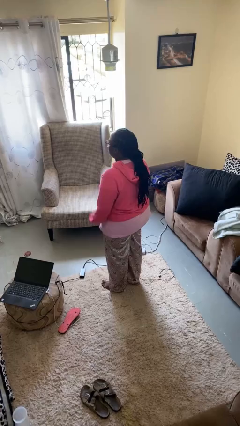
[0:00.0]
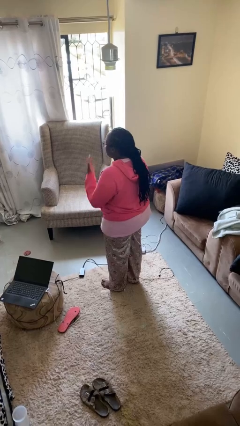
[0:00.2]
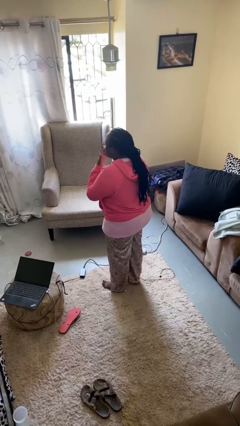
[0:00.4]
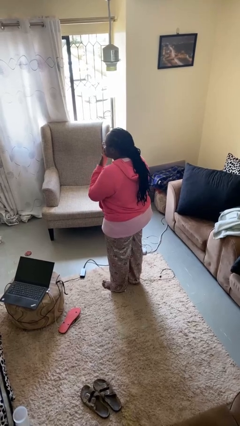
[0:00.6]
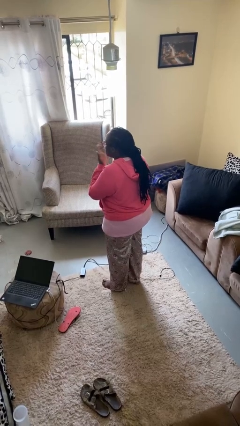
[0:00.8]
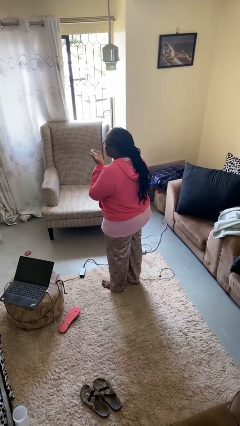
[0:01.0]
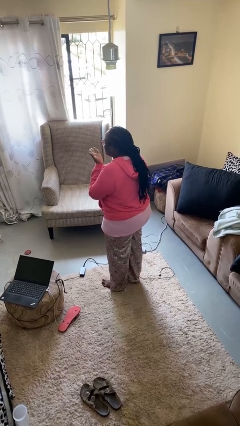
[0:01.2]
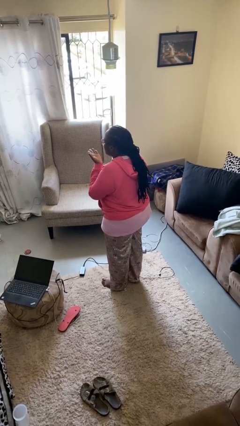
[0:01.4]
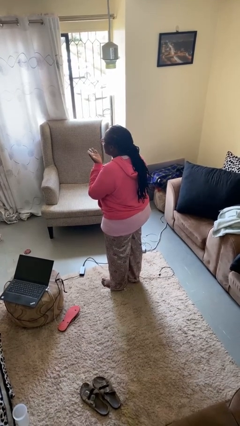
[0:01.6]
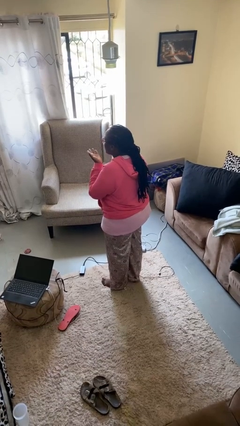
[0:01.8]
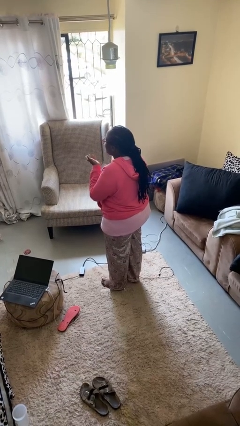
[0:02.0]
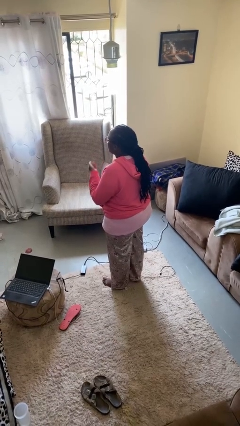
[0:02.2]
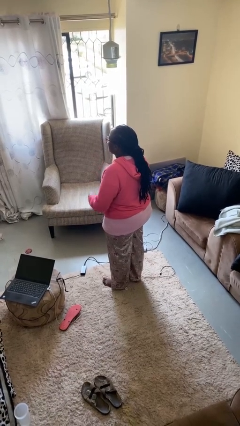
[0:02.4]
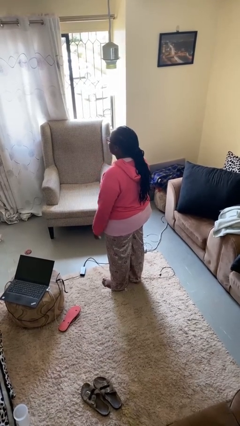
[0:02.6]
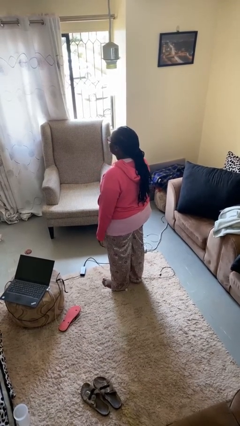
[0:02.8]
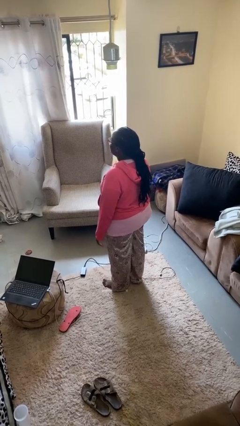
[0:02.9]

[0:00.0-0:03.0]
person gestures blow kiss

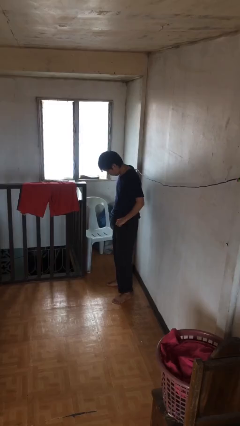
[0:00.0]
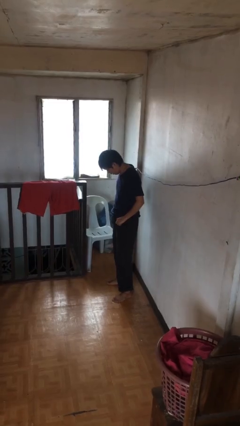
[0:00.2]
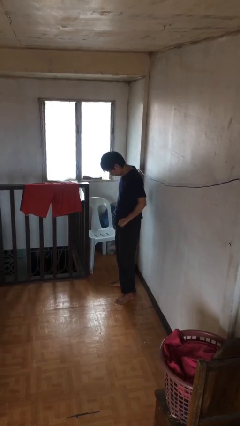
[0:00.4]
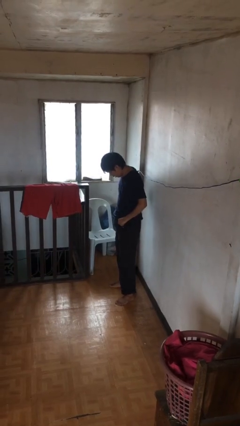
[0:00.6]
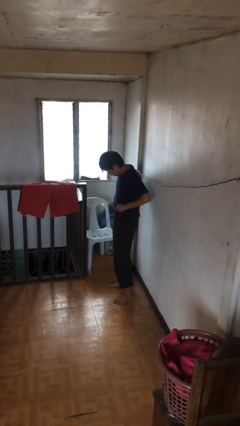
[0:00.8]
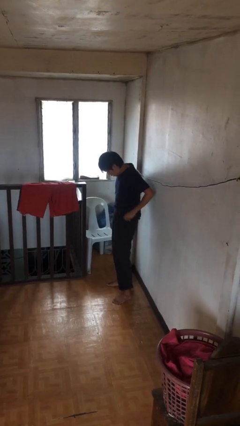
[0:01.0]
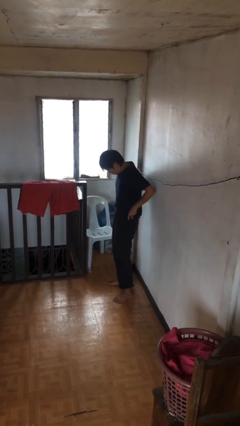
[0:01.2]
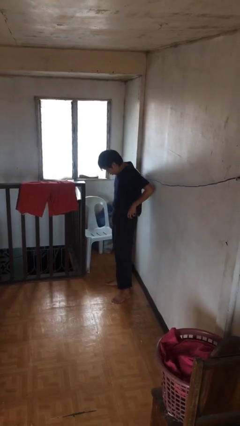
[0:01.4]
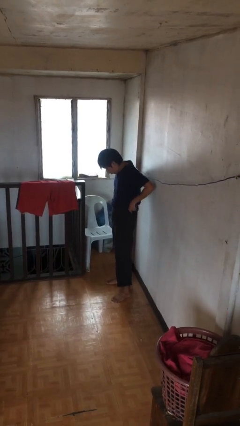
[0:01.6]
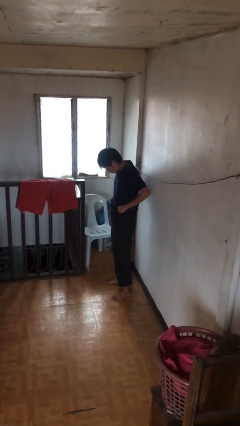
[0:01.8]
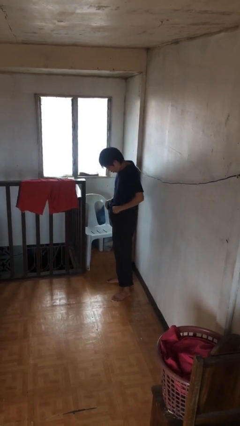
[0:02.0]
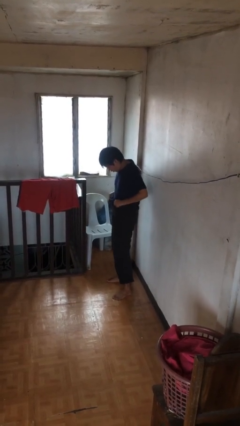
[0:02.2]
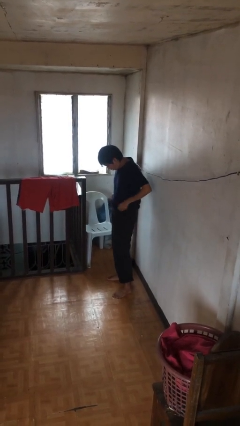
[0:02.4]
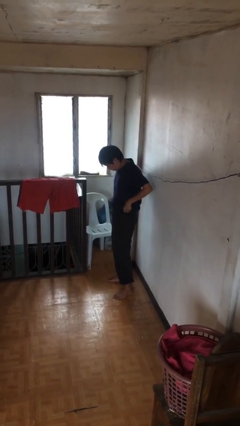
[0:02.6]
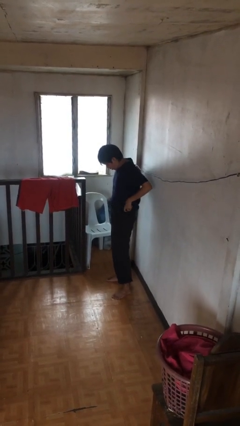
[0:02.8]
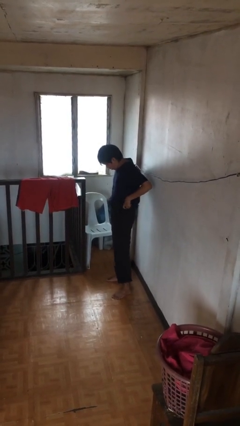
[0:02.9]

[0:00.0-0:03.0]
person hikes up pants

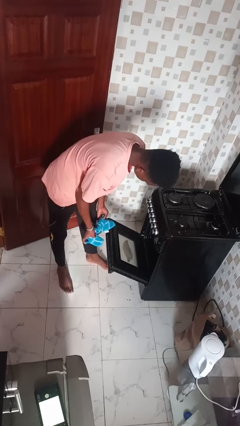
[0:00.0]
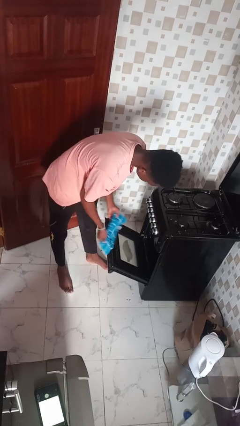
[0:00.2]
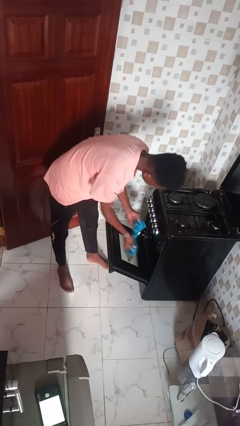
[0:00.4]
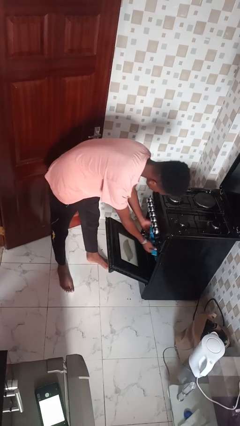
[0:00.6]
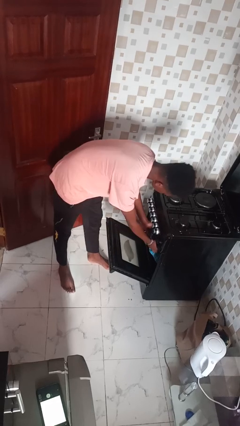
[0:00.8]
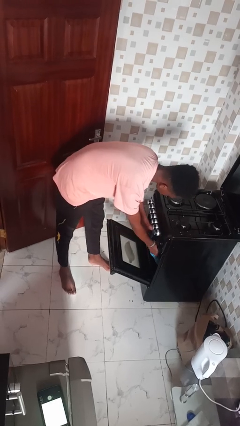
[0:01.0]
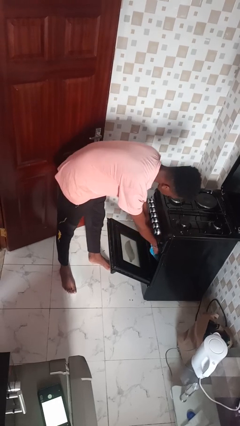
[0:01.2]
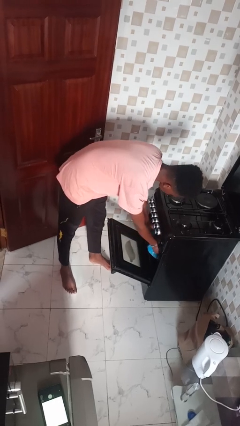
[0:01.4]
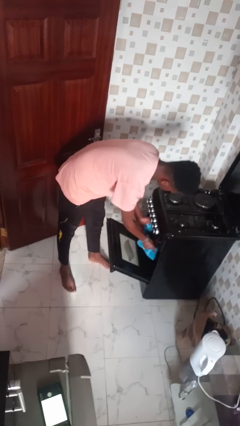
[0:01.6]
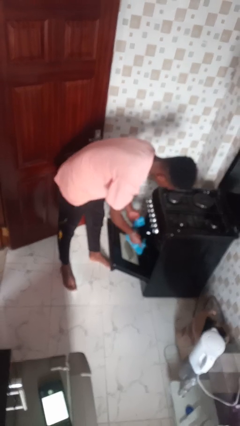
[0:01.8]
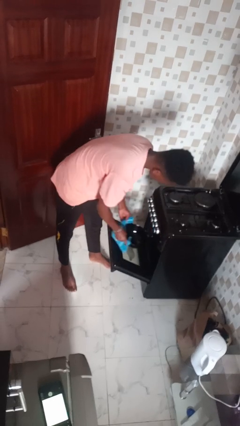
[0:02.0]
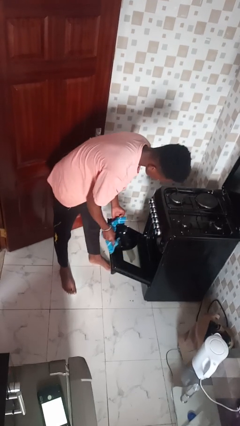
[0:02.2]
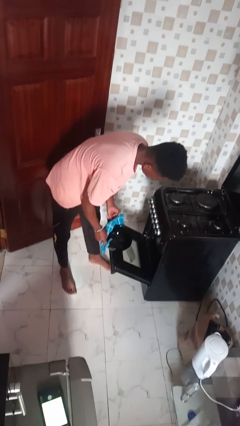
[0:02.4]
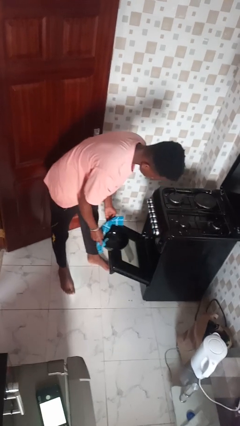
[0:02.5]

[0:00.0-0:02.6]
person takes object from oven

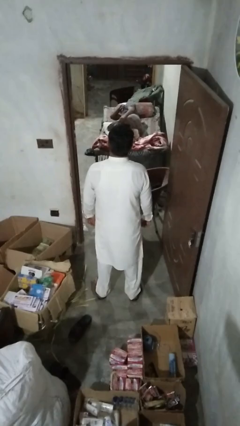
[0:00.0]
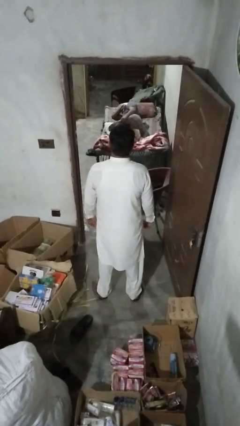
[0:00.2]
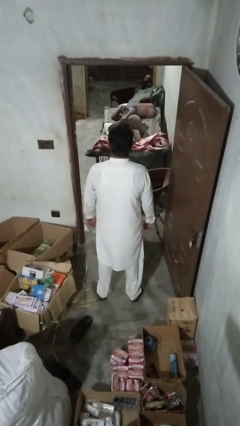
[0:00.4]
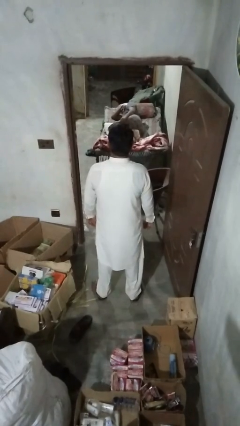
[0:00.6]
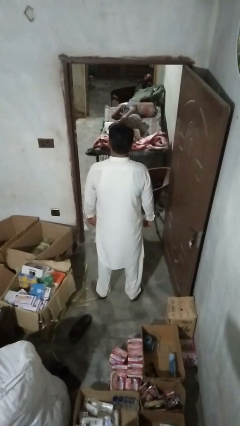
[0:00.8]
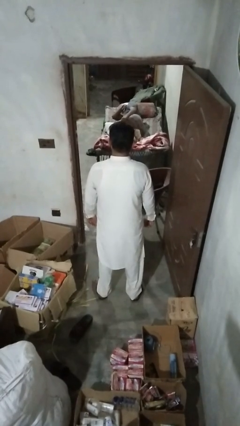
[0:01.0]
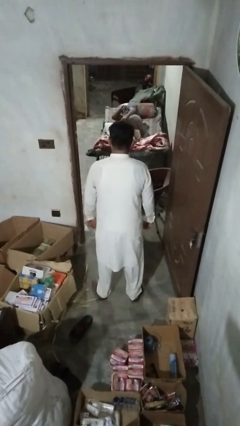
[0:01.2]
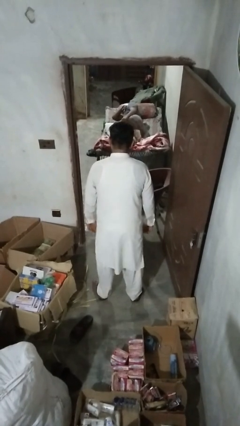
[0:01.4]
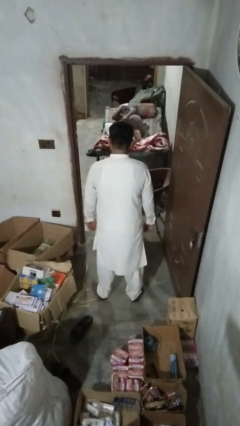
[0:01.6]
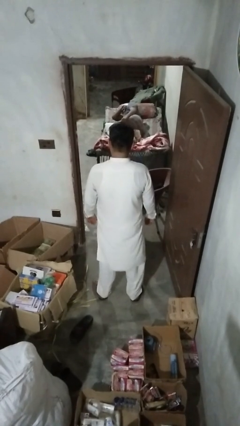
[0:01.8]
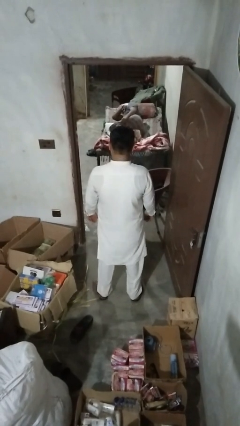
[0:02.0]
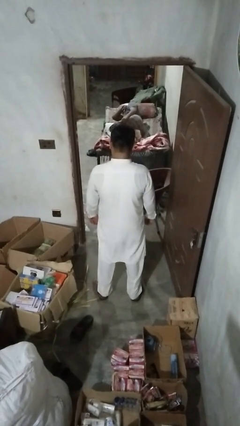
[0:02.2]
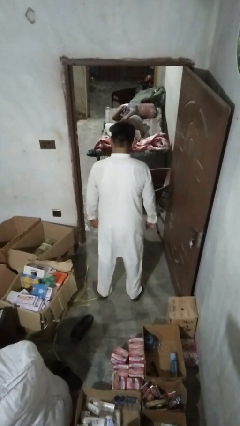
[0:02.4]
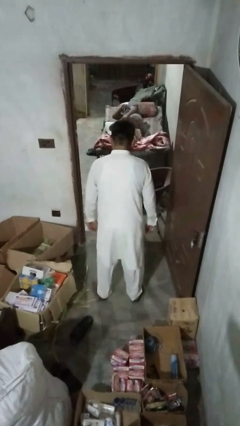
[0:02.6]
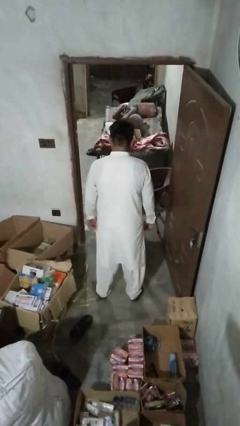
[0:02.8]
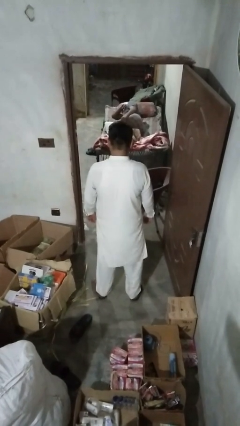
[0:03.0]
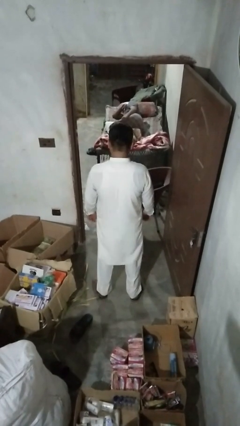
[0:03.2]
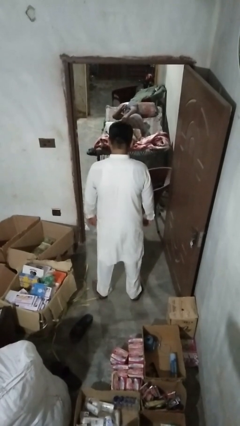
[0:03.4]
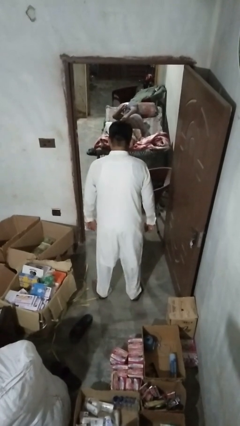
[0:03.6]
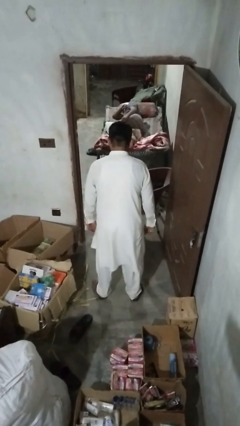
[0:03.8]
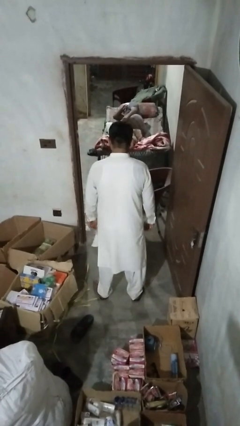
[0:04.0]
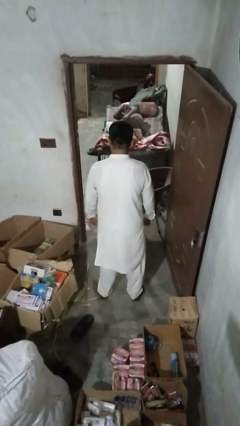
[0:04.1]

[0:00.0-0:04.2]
person wiggles hips

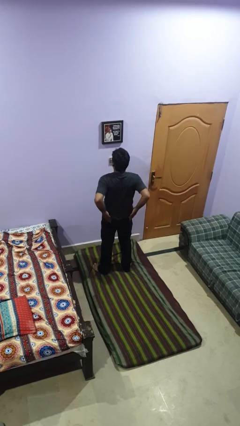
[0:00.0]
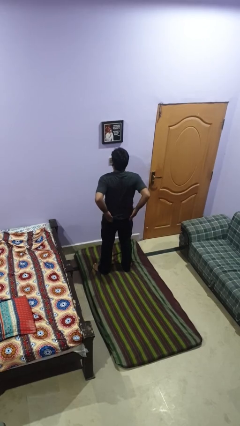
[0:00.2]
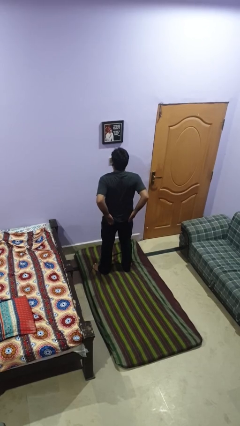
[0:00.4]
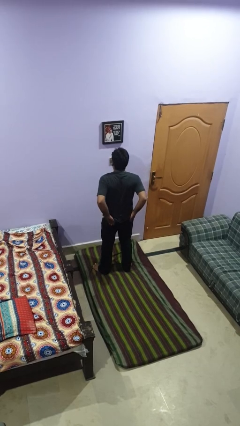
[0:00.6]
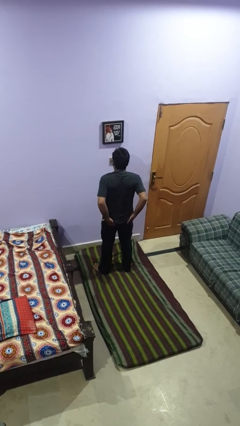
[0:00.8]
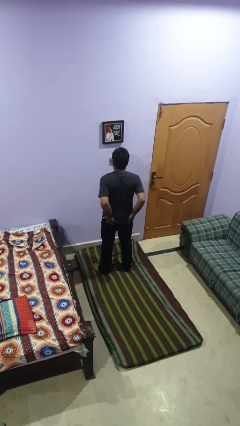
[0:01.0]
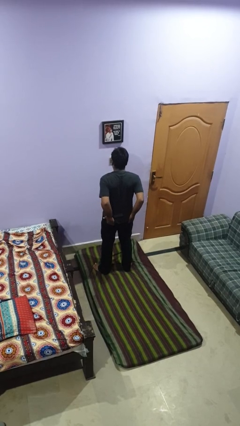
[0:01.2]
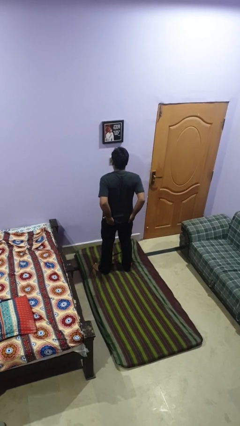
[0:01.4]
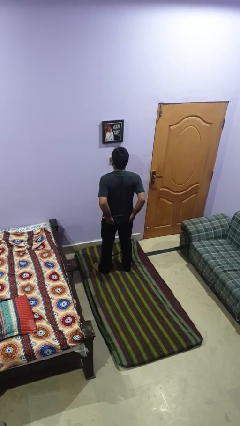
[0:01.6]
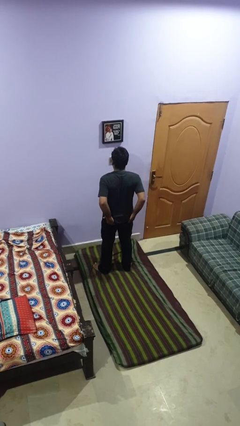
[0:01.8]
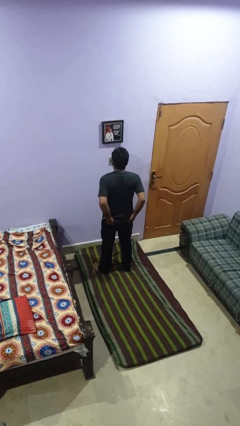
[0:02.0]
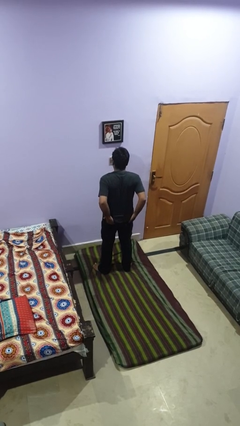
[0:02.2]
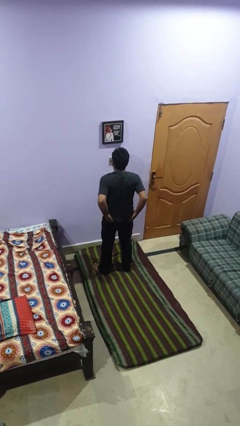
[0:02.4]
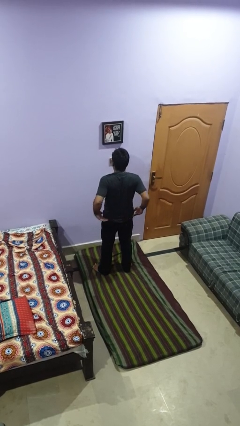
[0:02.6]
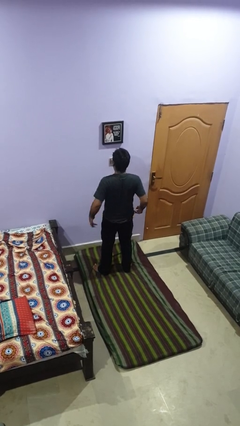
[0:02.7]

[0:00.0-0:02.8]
person puts hands in back pockets

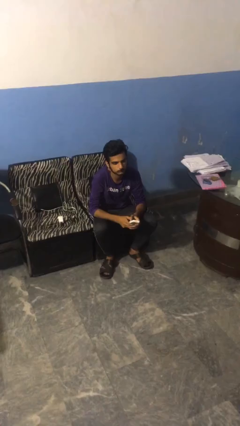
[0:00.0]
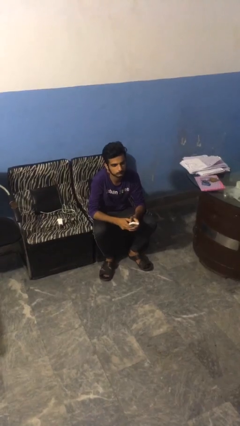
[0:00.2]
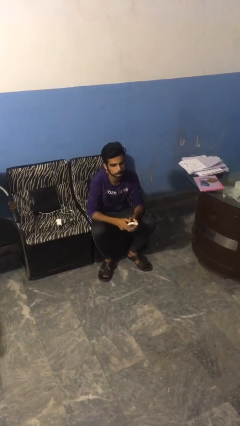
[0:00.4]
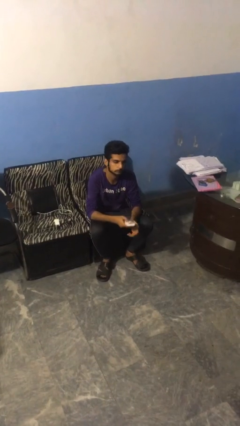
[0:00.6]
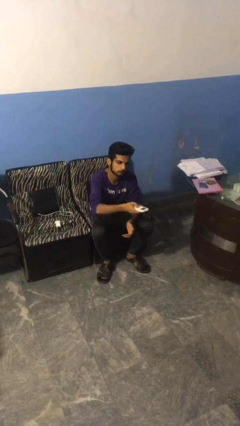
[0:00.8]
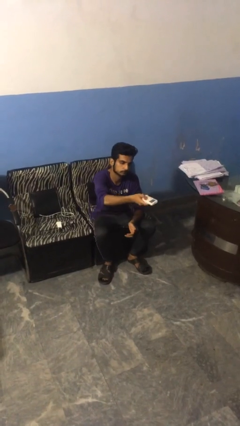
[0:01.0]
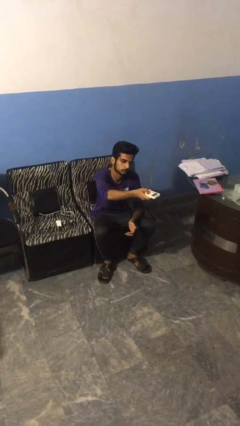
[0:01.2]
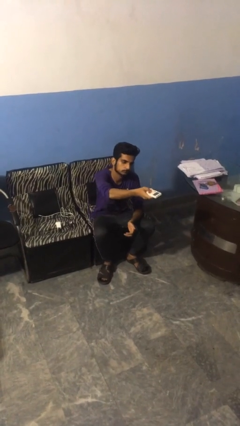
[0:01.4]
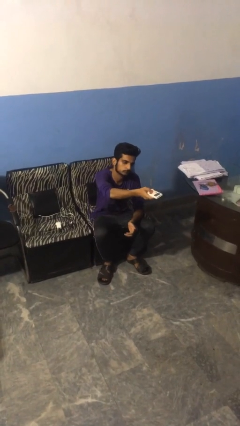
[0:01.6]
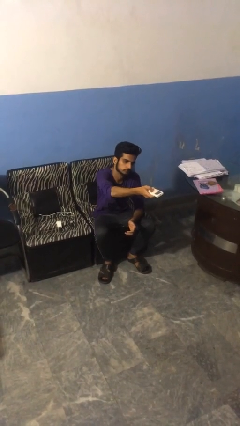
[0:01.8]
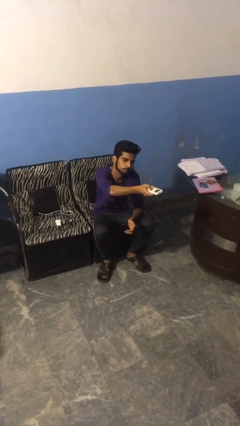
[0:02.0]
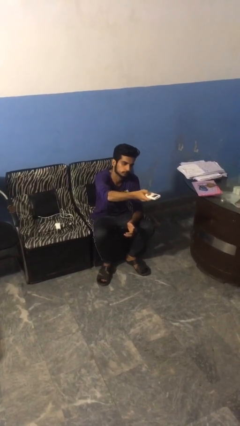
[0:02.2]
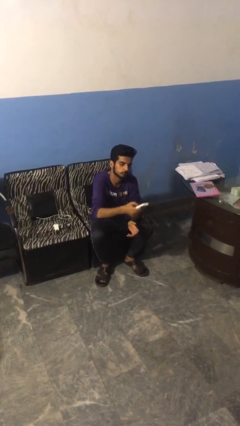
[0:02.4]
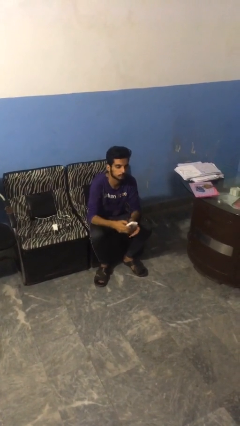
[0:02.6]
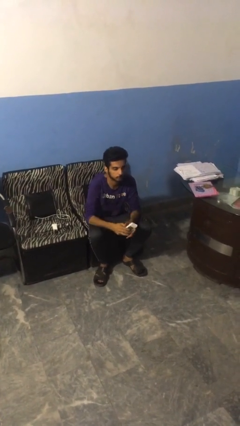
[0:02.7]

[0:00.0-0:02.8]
person uses television remote
